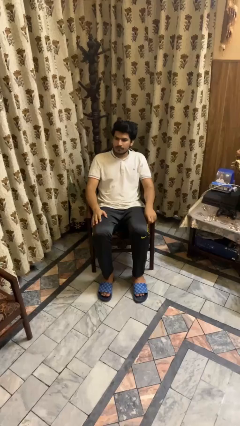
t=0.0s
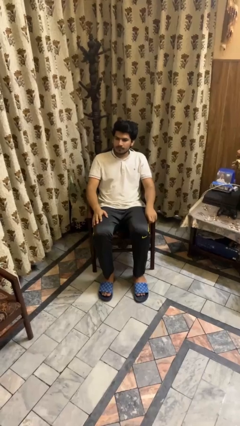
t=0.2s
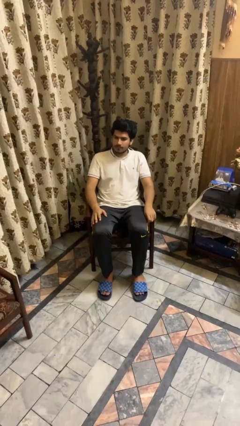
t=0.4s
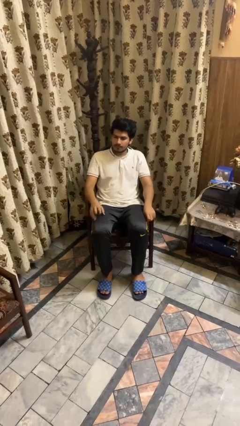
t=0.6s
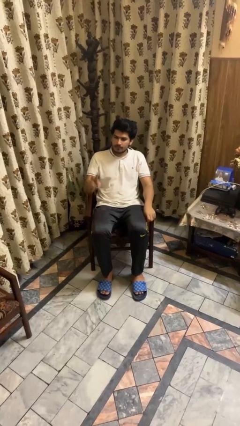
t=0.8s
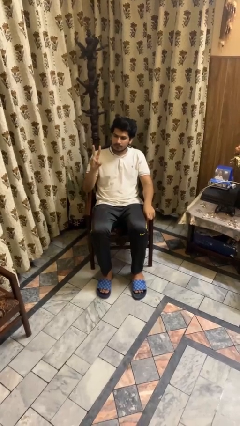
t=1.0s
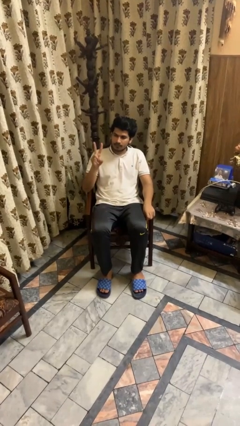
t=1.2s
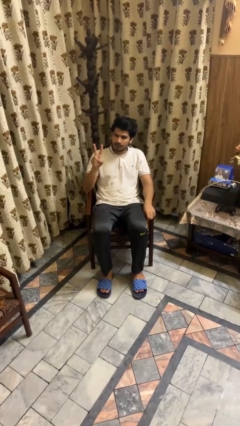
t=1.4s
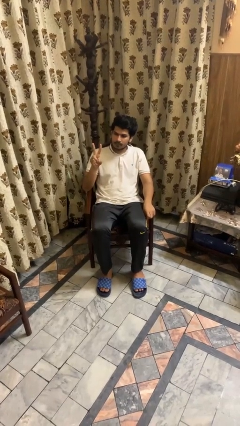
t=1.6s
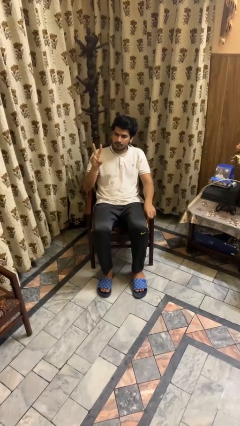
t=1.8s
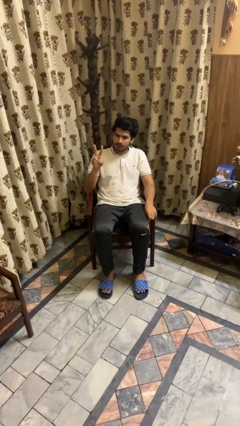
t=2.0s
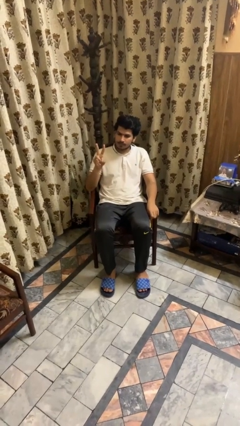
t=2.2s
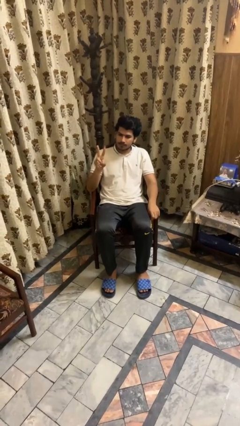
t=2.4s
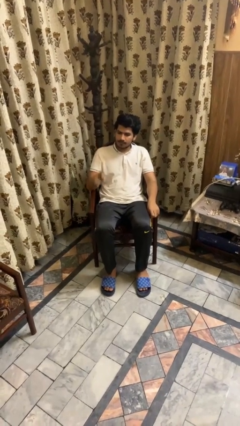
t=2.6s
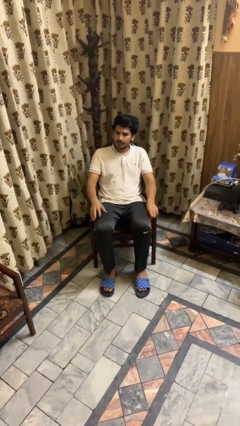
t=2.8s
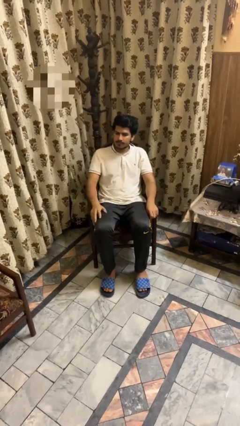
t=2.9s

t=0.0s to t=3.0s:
person gestures peace

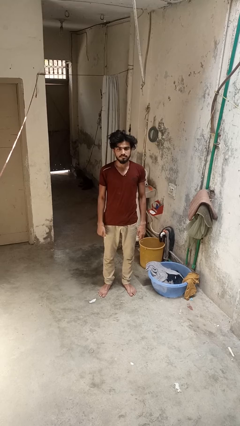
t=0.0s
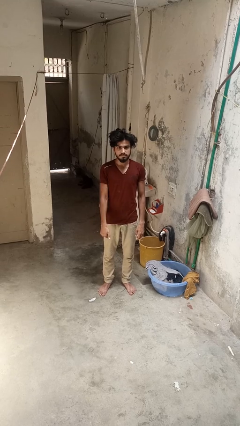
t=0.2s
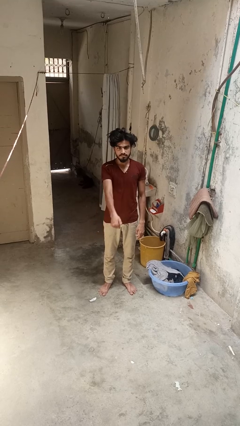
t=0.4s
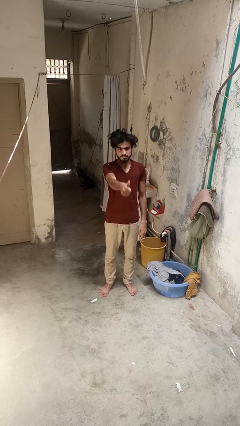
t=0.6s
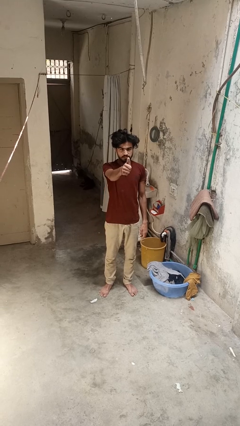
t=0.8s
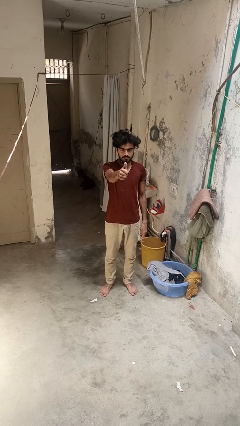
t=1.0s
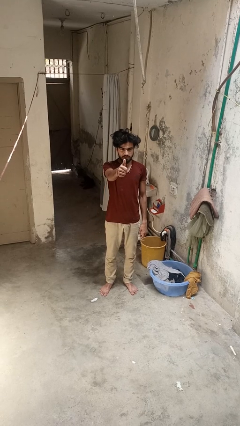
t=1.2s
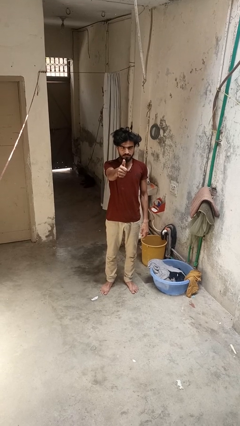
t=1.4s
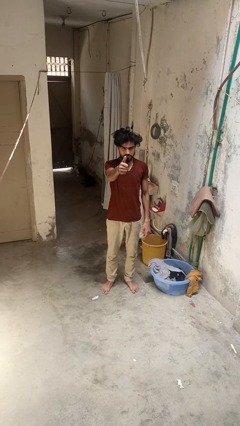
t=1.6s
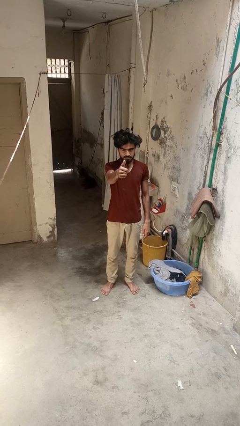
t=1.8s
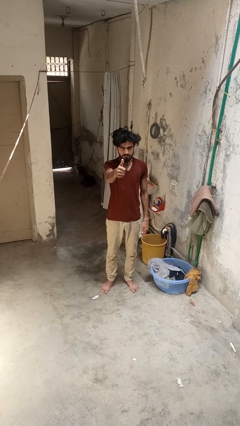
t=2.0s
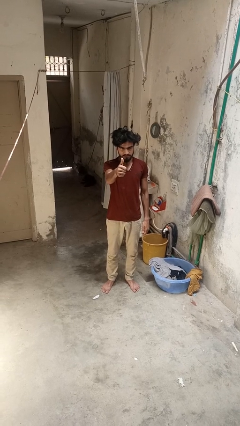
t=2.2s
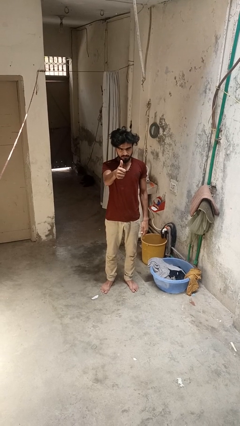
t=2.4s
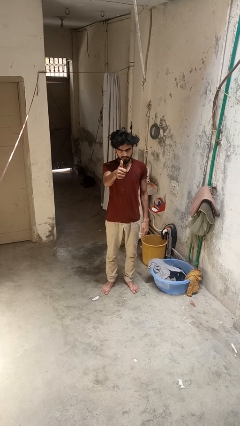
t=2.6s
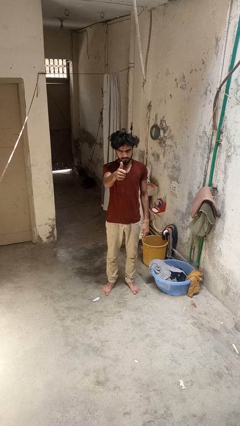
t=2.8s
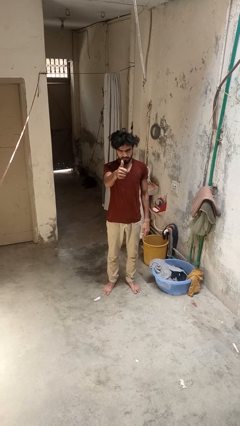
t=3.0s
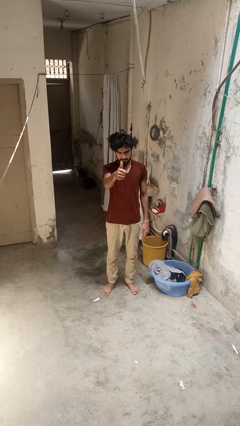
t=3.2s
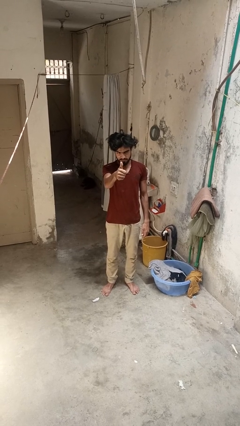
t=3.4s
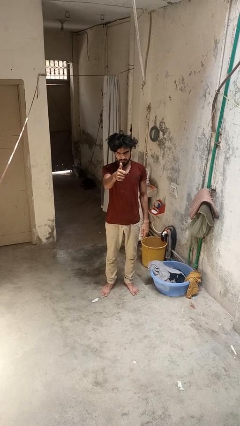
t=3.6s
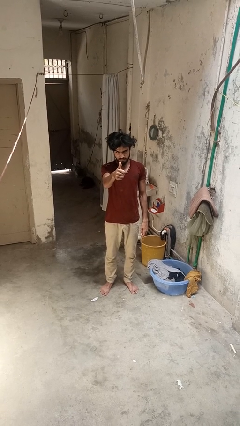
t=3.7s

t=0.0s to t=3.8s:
person gestures thumbs up

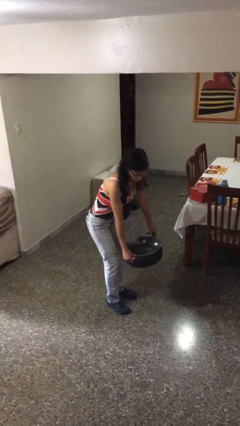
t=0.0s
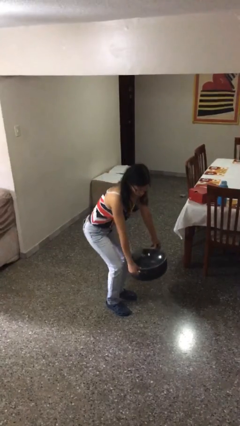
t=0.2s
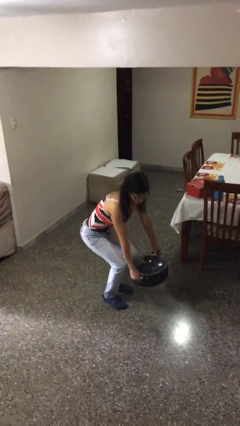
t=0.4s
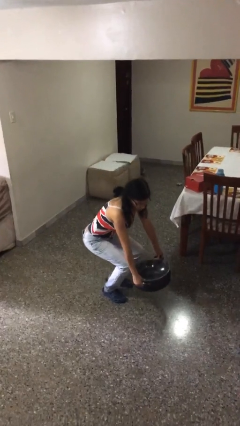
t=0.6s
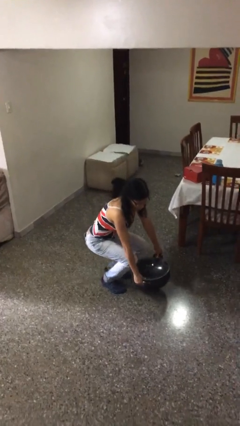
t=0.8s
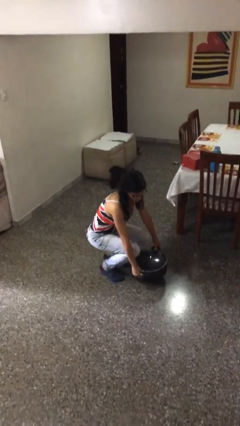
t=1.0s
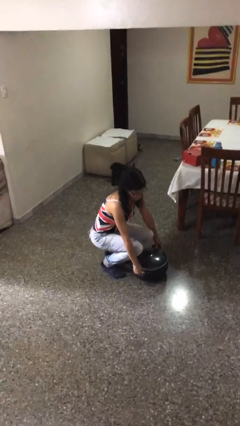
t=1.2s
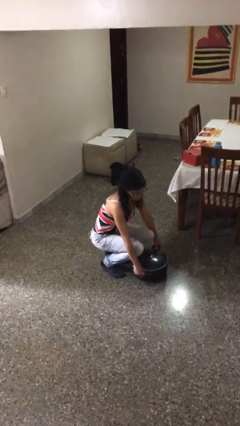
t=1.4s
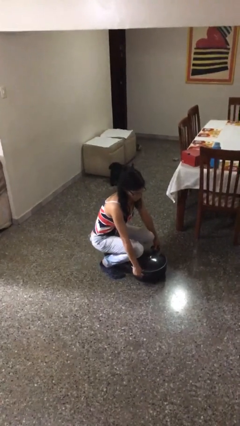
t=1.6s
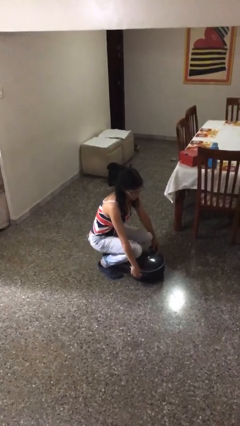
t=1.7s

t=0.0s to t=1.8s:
person puts down object on floor

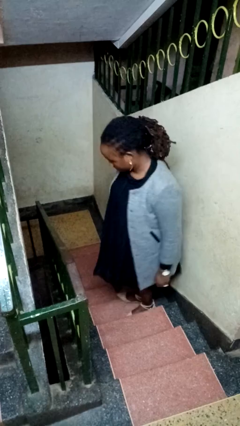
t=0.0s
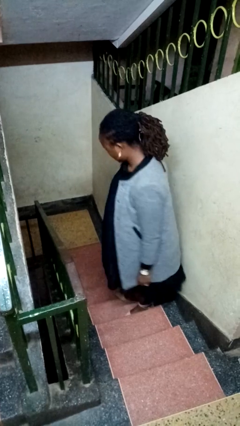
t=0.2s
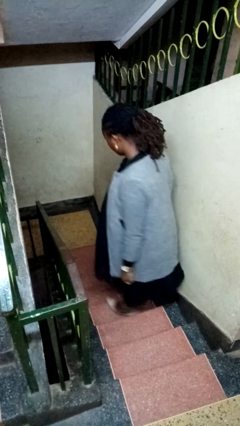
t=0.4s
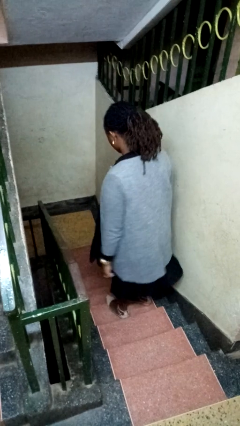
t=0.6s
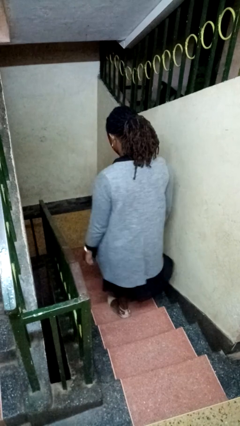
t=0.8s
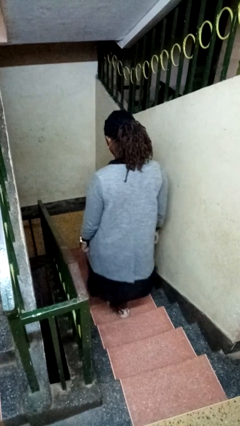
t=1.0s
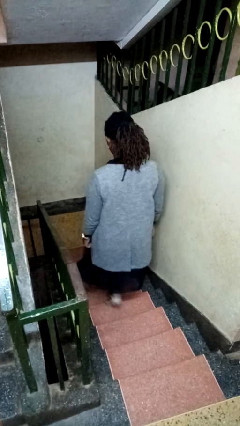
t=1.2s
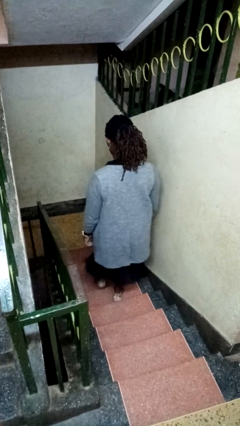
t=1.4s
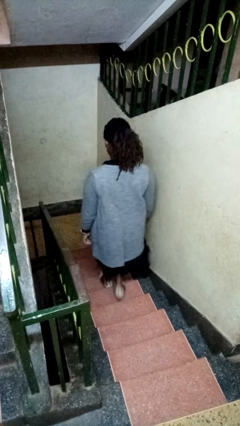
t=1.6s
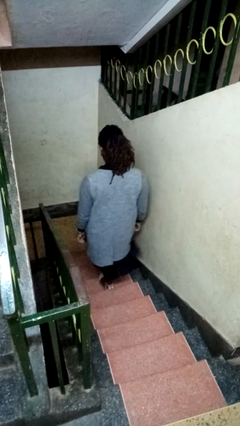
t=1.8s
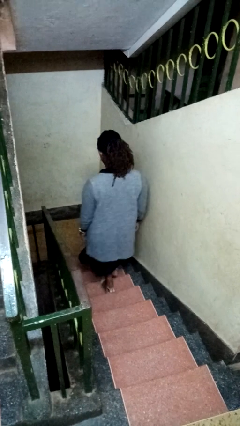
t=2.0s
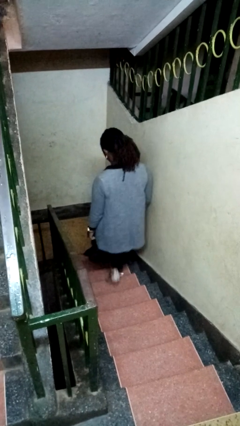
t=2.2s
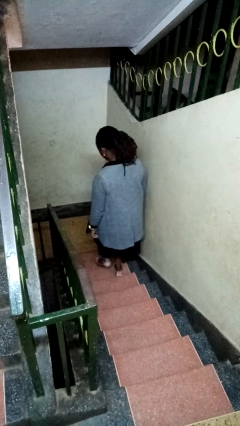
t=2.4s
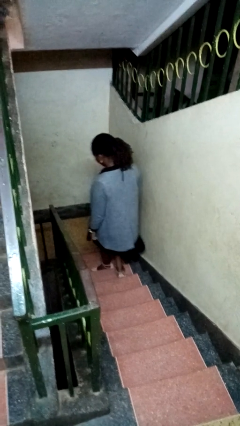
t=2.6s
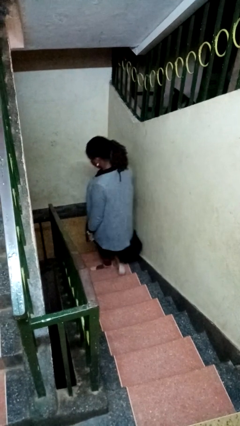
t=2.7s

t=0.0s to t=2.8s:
person climbs down stairs

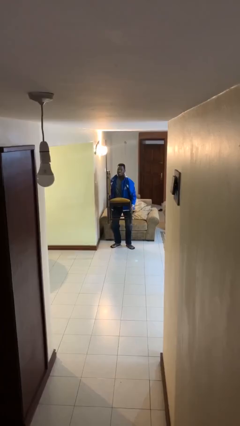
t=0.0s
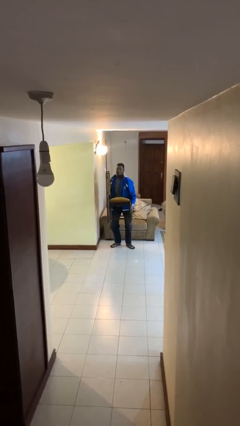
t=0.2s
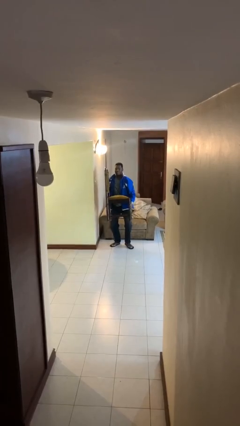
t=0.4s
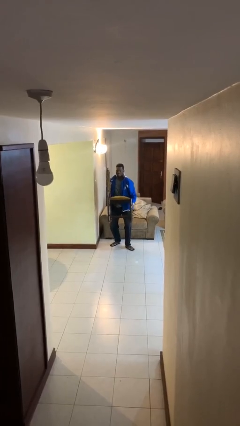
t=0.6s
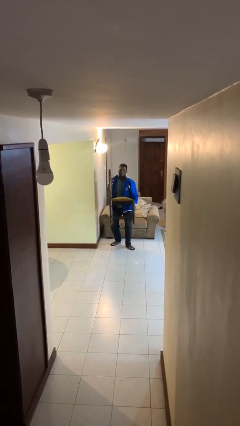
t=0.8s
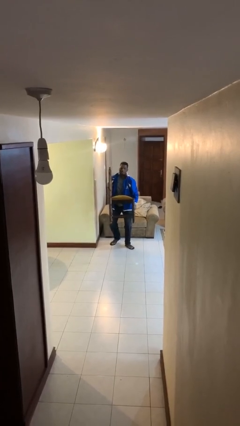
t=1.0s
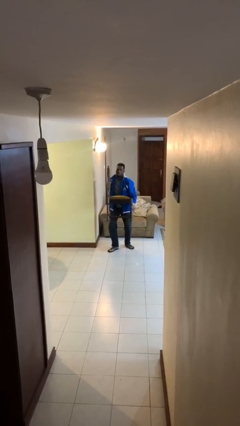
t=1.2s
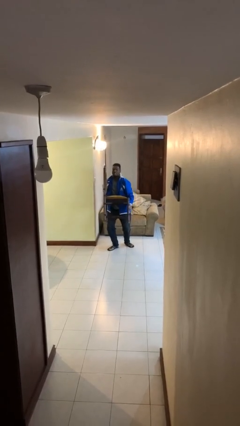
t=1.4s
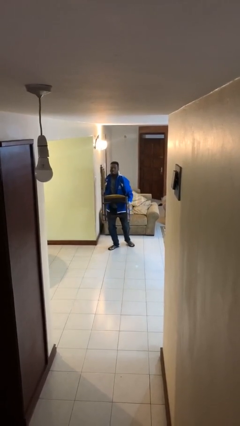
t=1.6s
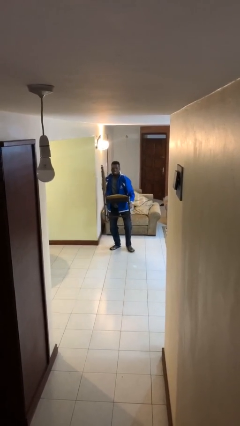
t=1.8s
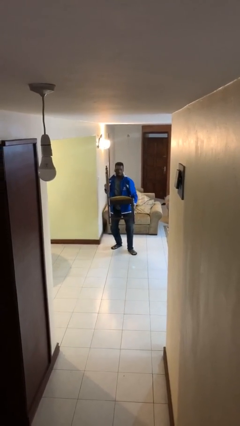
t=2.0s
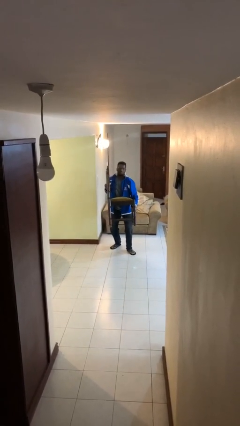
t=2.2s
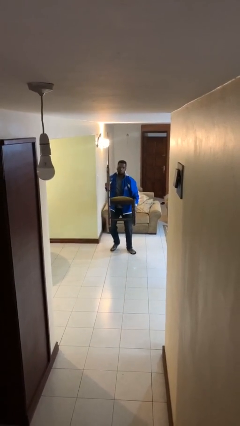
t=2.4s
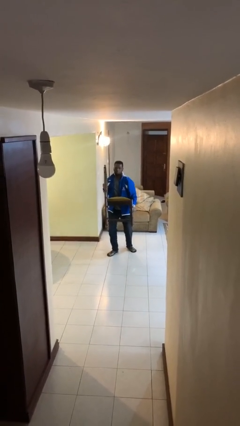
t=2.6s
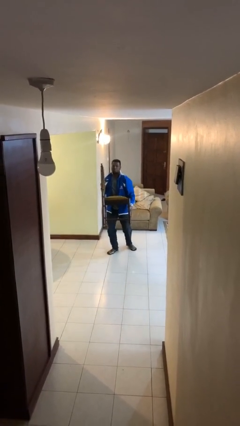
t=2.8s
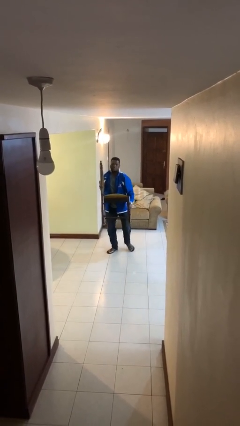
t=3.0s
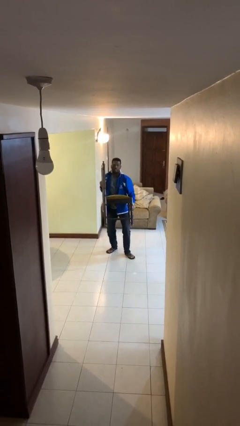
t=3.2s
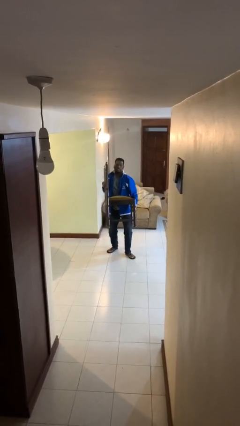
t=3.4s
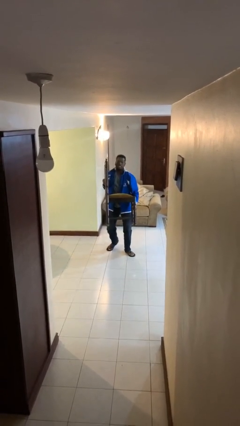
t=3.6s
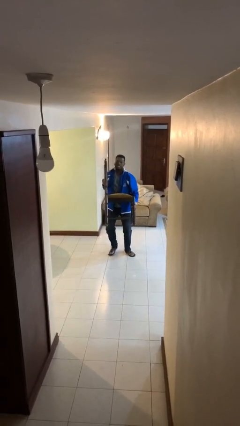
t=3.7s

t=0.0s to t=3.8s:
person carries heavy object

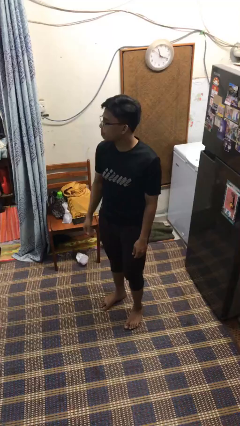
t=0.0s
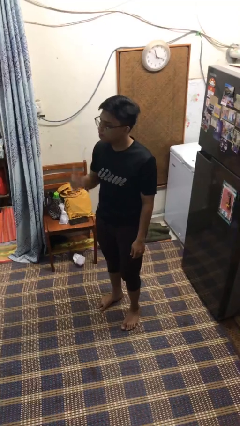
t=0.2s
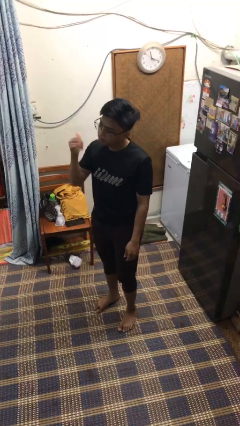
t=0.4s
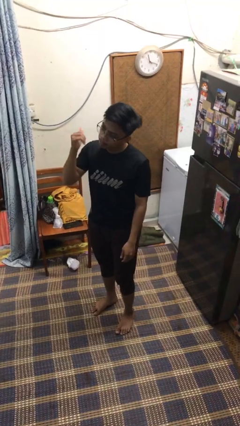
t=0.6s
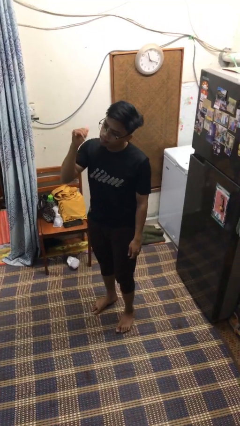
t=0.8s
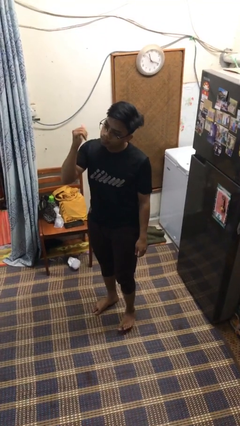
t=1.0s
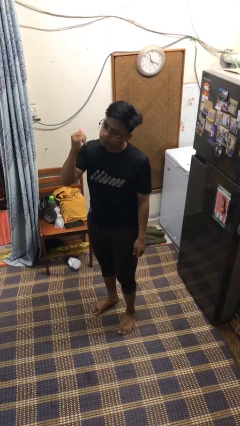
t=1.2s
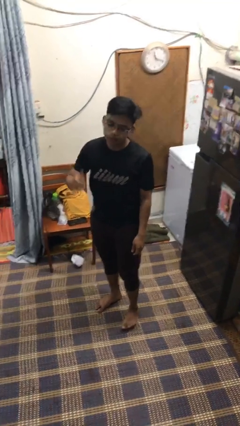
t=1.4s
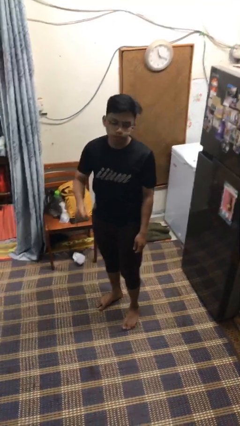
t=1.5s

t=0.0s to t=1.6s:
person gestures hang loose

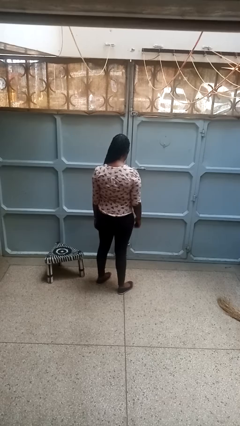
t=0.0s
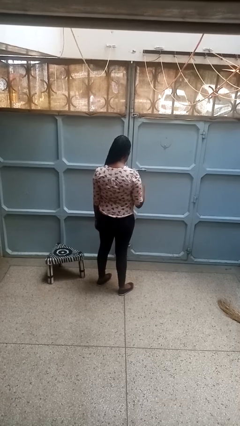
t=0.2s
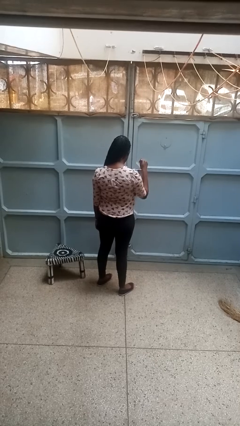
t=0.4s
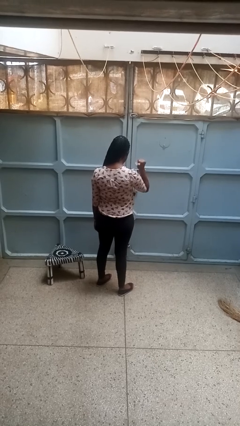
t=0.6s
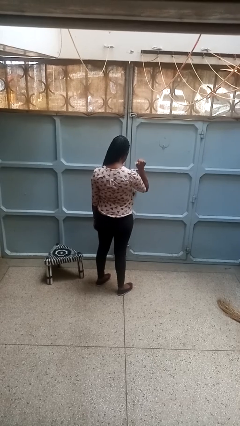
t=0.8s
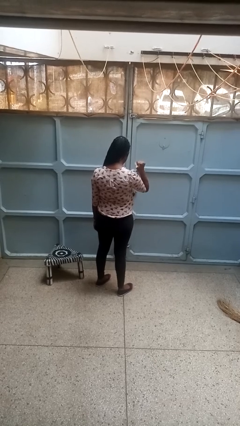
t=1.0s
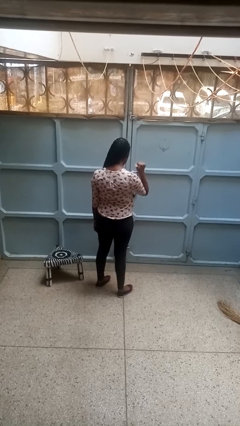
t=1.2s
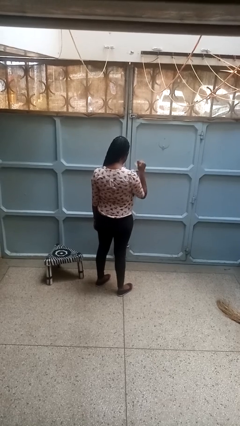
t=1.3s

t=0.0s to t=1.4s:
person gestures behind me
